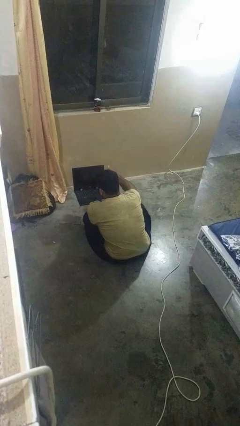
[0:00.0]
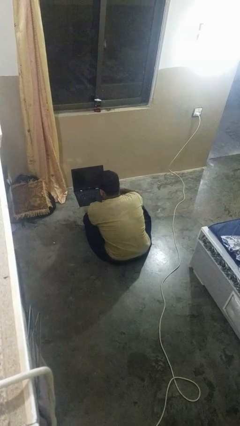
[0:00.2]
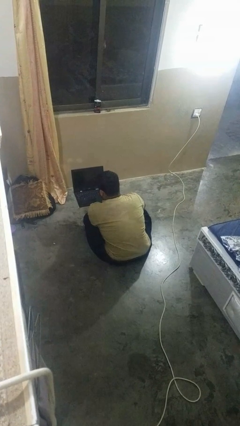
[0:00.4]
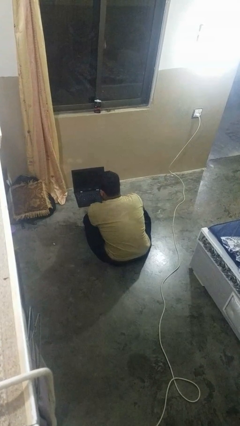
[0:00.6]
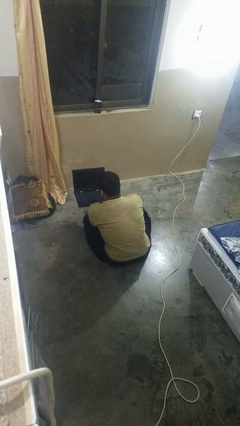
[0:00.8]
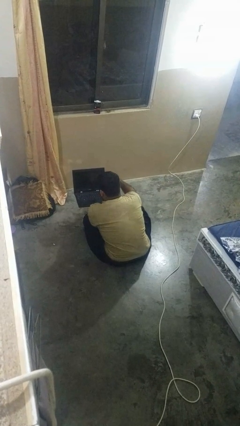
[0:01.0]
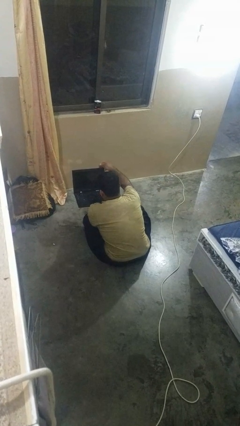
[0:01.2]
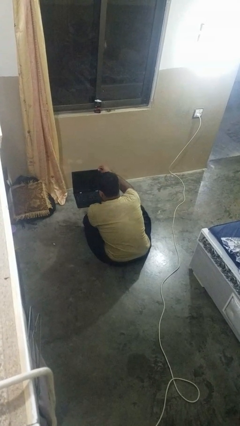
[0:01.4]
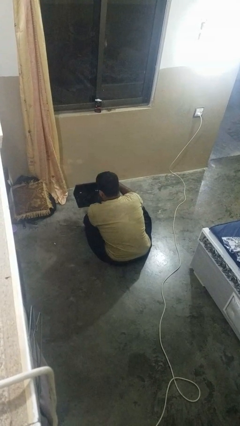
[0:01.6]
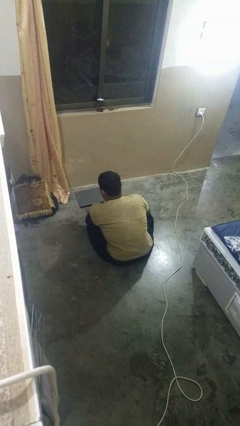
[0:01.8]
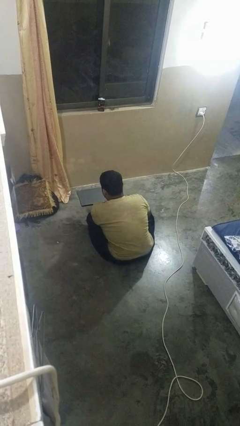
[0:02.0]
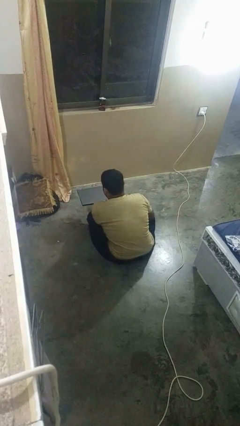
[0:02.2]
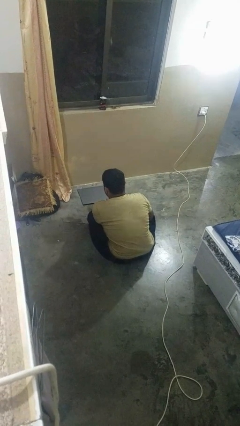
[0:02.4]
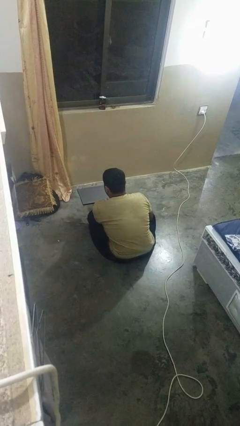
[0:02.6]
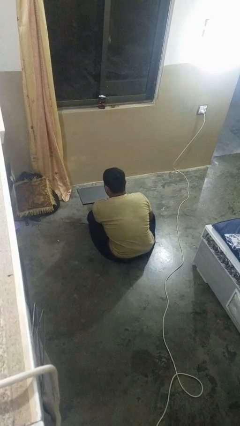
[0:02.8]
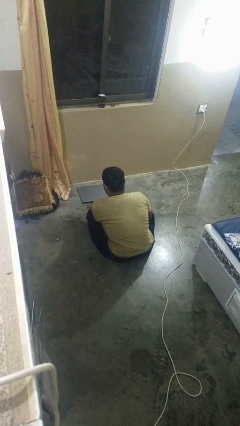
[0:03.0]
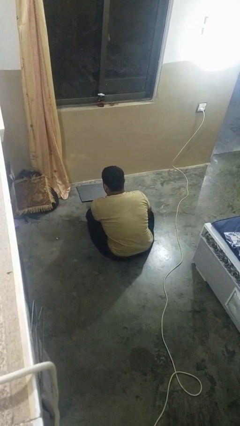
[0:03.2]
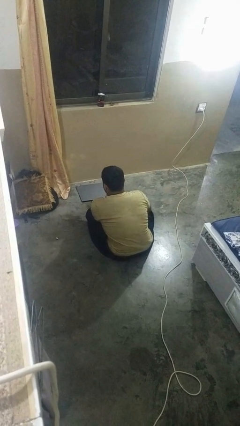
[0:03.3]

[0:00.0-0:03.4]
person closes laptop

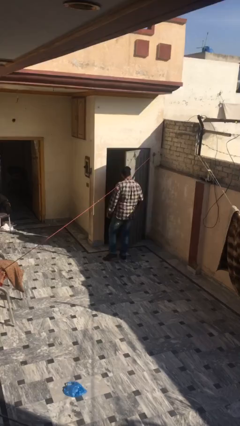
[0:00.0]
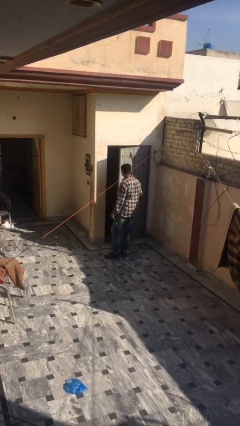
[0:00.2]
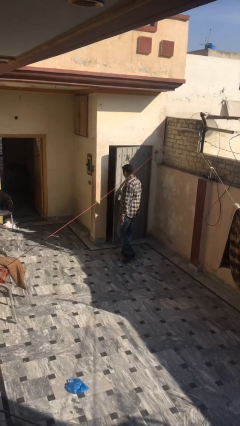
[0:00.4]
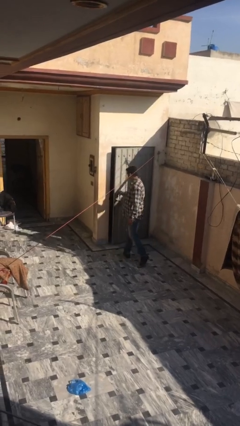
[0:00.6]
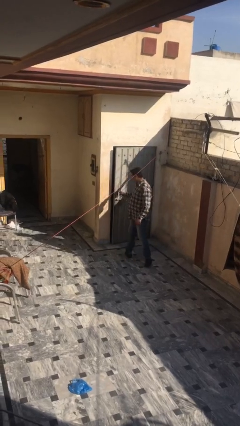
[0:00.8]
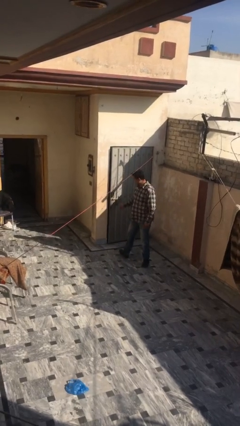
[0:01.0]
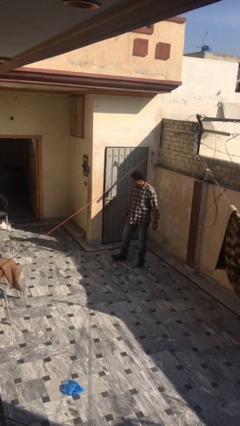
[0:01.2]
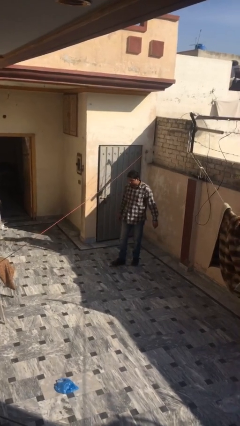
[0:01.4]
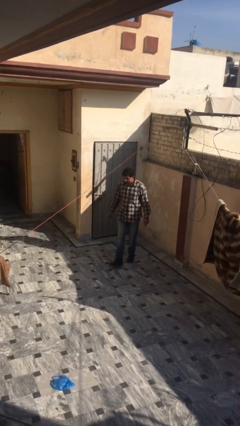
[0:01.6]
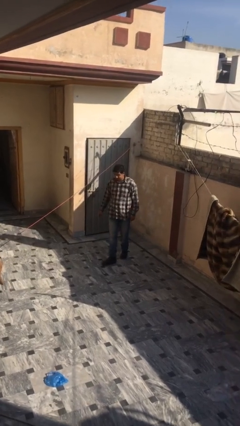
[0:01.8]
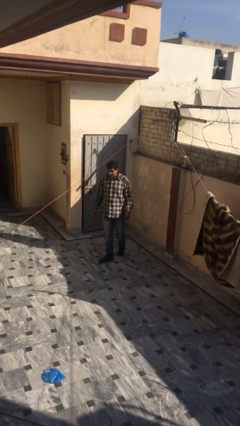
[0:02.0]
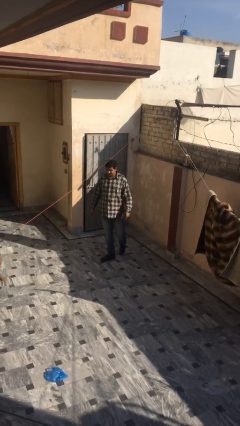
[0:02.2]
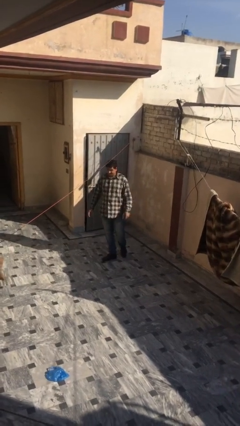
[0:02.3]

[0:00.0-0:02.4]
person closes facility door

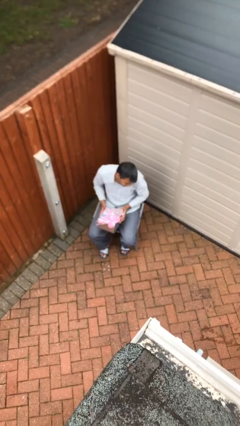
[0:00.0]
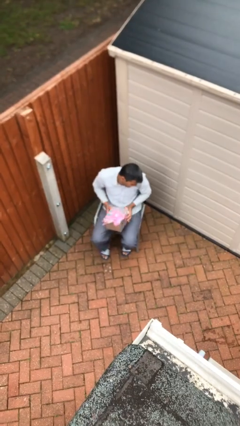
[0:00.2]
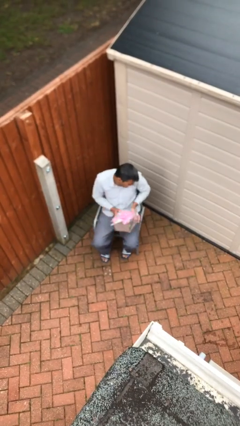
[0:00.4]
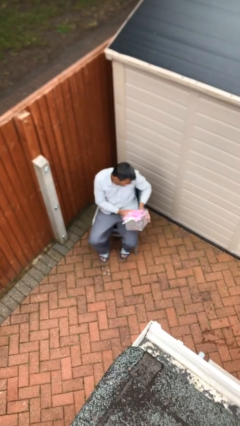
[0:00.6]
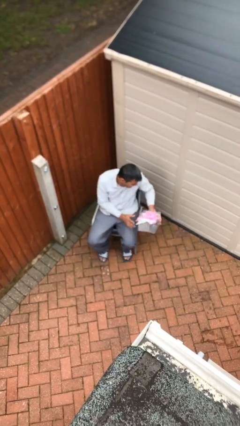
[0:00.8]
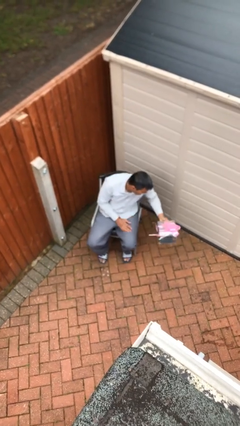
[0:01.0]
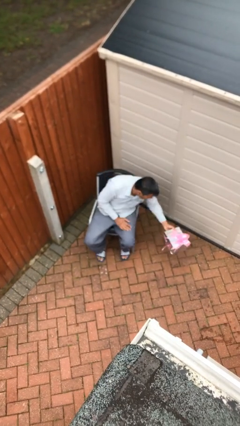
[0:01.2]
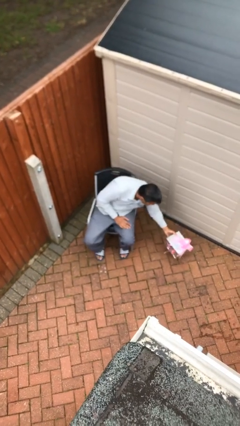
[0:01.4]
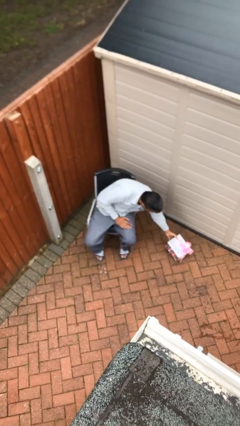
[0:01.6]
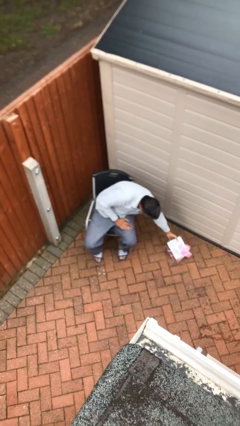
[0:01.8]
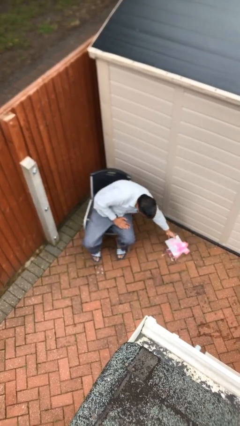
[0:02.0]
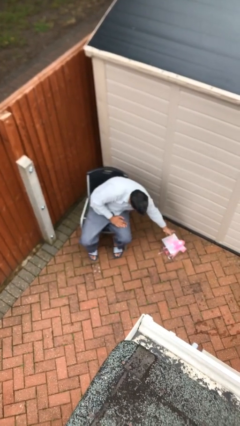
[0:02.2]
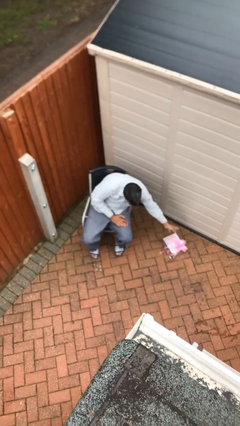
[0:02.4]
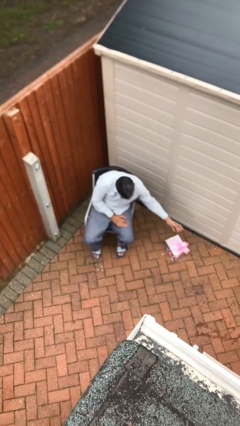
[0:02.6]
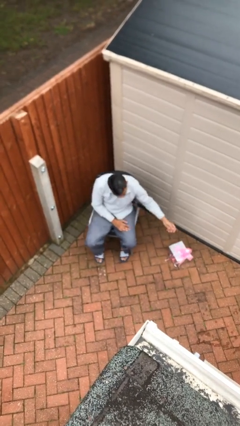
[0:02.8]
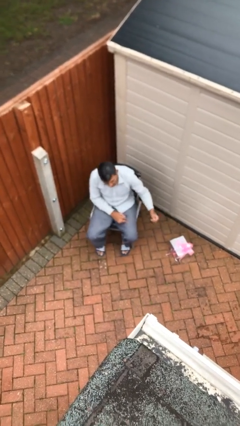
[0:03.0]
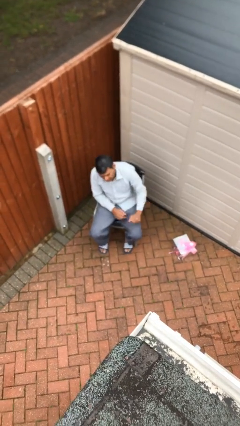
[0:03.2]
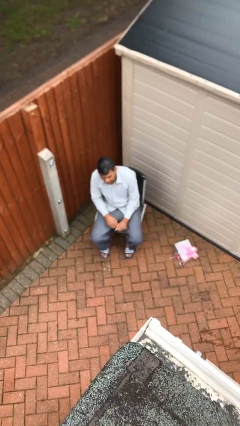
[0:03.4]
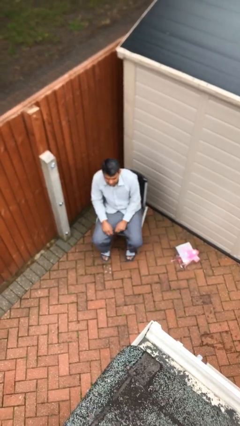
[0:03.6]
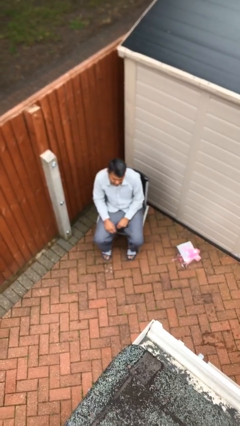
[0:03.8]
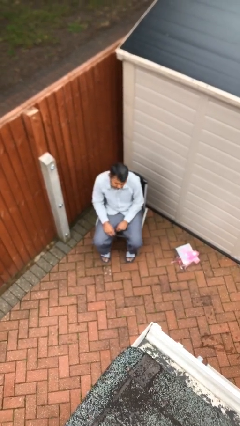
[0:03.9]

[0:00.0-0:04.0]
person puts down object on floor

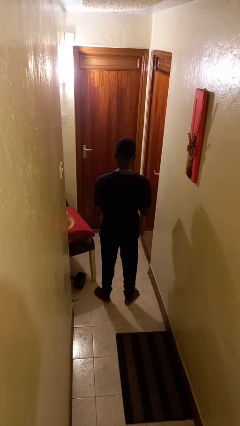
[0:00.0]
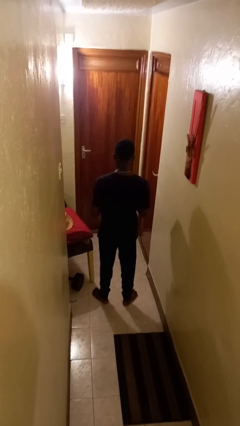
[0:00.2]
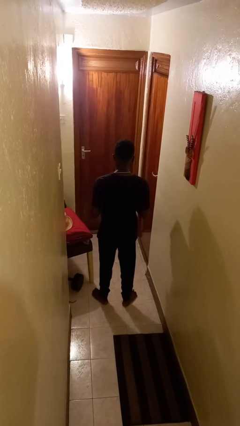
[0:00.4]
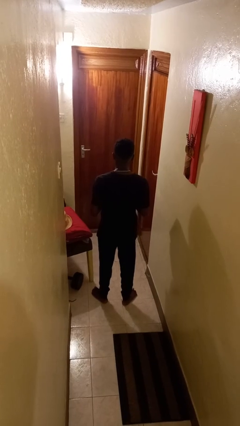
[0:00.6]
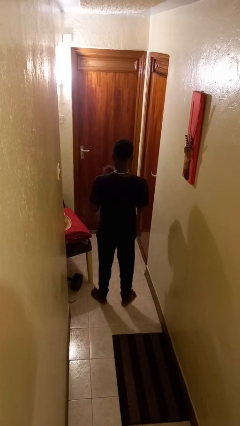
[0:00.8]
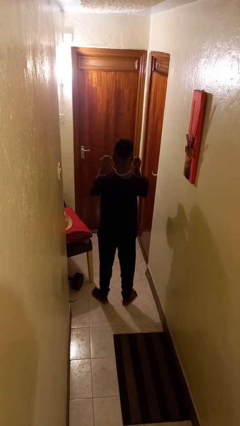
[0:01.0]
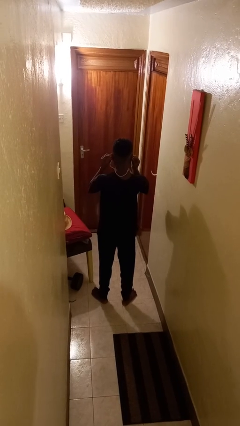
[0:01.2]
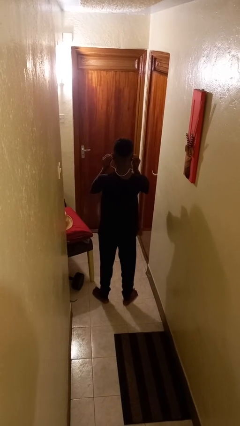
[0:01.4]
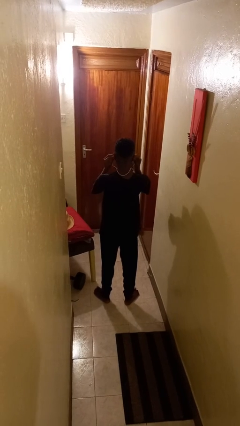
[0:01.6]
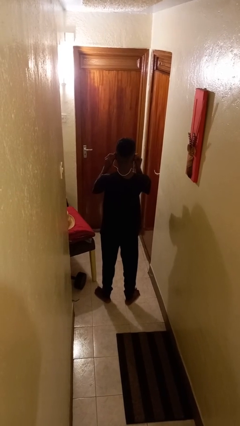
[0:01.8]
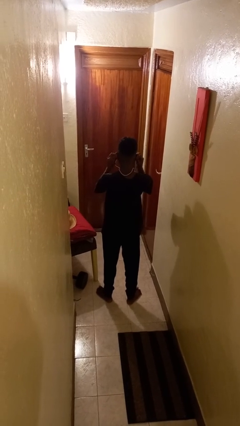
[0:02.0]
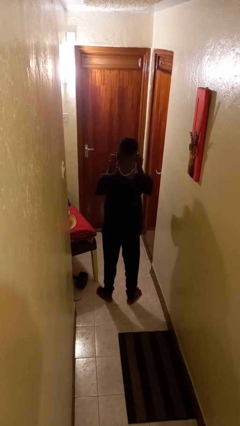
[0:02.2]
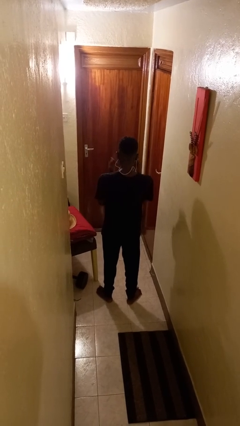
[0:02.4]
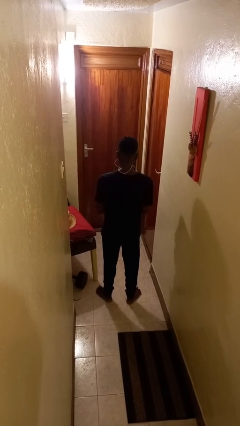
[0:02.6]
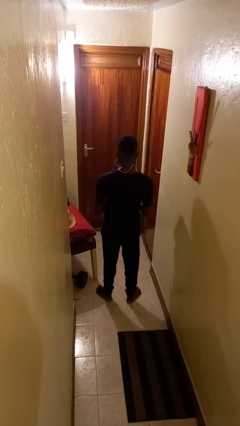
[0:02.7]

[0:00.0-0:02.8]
person puts on headphones

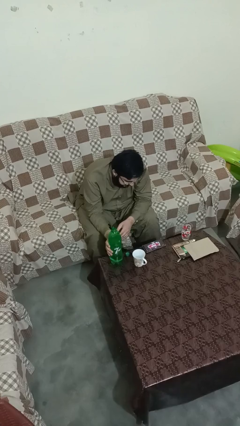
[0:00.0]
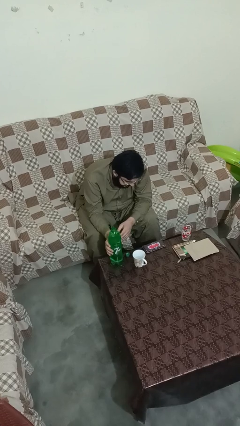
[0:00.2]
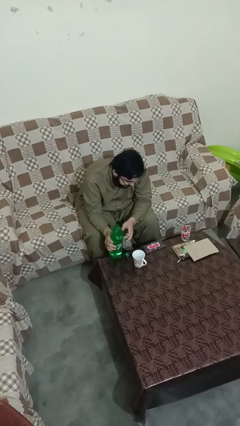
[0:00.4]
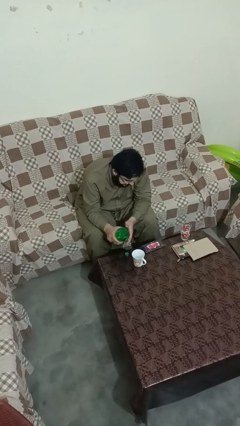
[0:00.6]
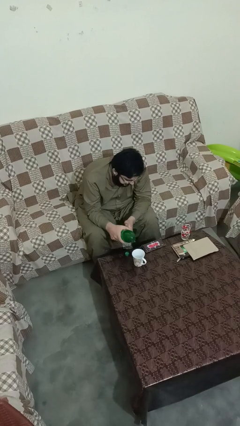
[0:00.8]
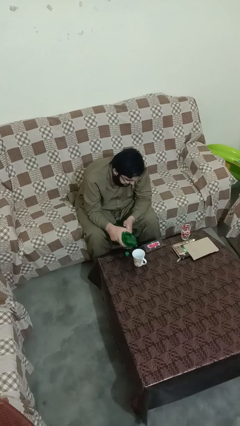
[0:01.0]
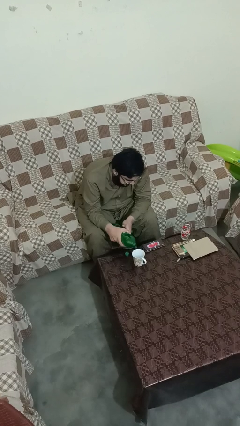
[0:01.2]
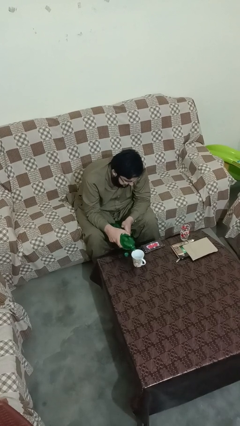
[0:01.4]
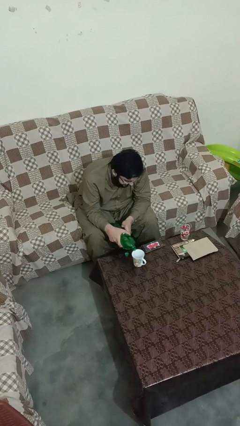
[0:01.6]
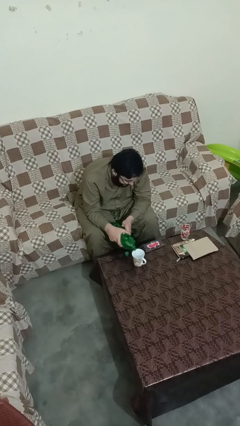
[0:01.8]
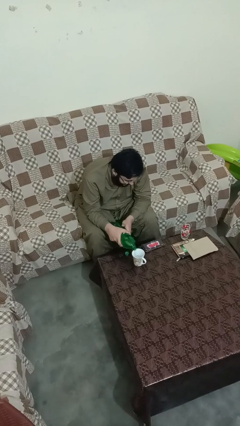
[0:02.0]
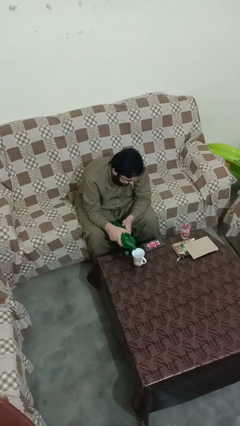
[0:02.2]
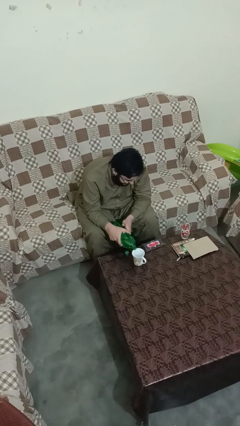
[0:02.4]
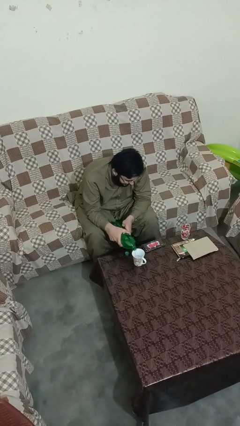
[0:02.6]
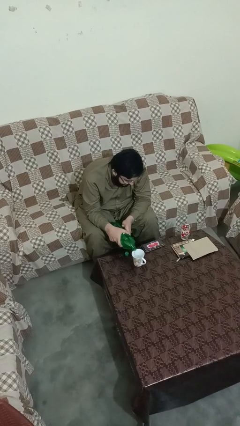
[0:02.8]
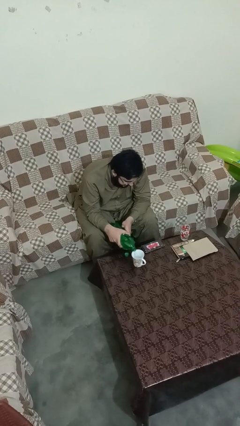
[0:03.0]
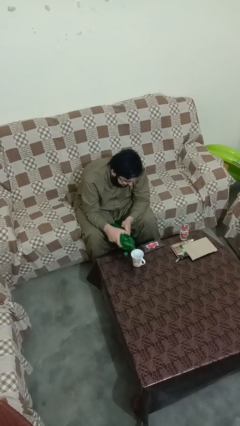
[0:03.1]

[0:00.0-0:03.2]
person pours liquid into cup

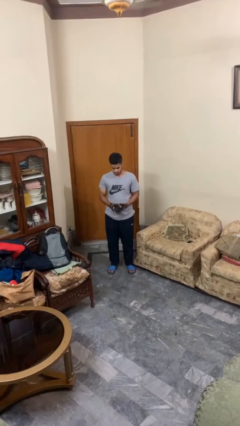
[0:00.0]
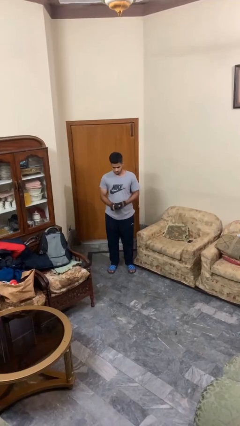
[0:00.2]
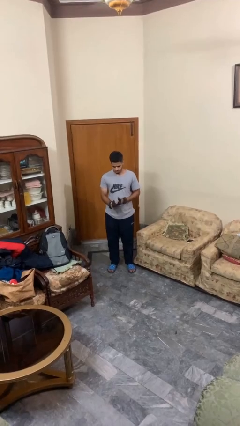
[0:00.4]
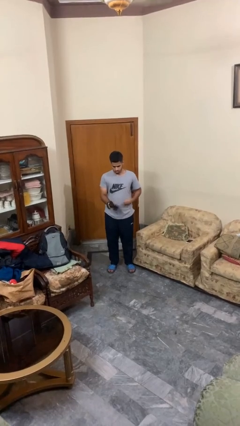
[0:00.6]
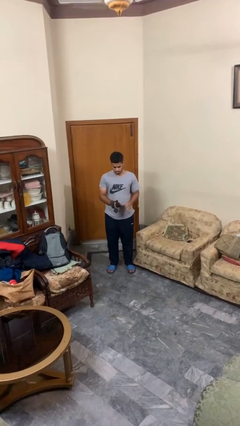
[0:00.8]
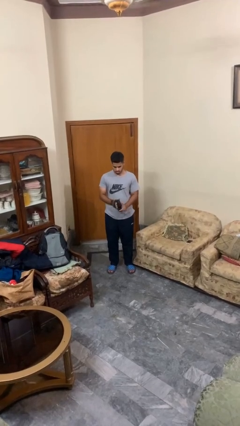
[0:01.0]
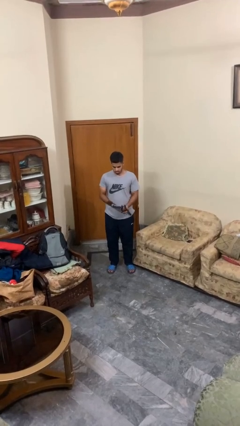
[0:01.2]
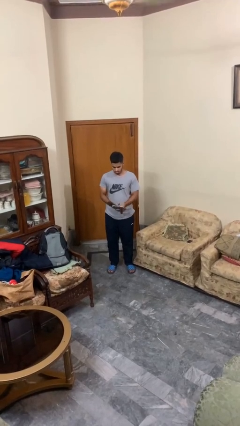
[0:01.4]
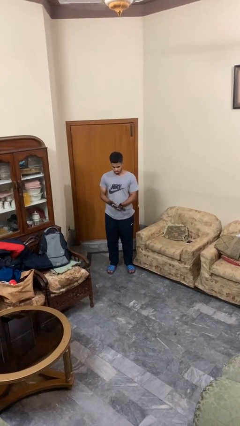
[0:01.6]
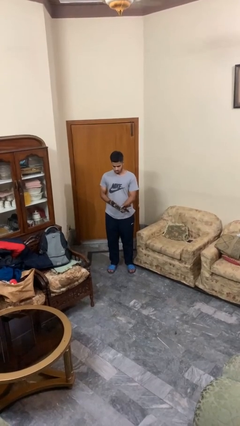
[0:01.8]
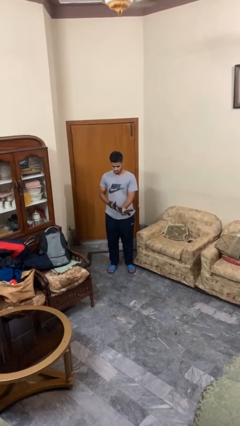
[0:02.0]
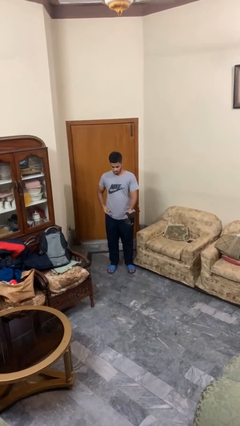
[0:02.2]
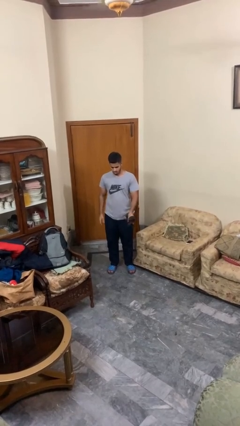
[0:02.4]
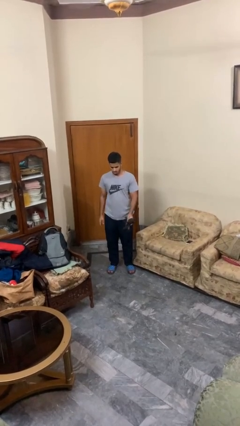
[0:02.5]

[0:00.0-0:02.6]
person takes off gloves
